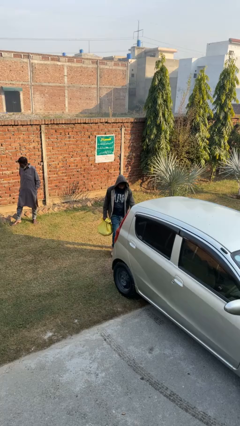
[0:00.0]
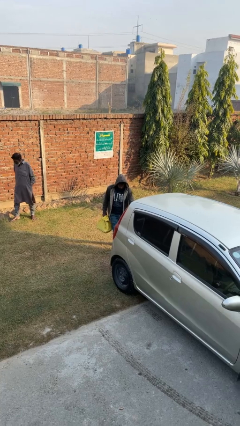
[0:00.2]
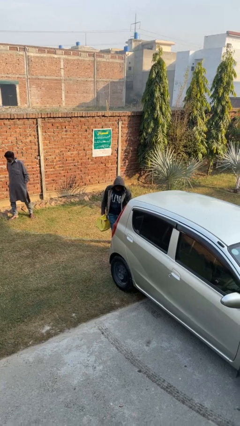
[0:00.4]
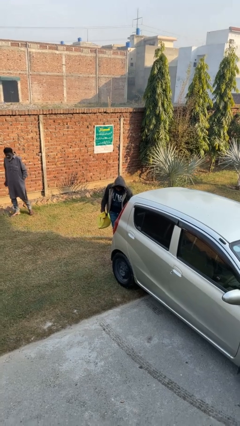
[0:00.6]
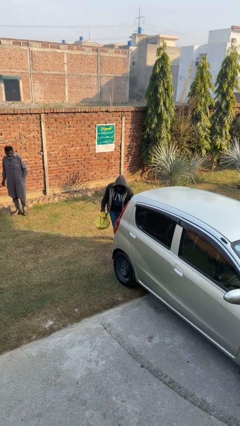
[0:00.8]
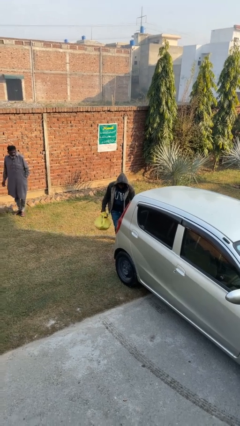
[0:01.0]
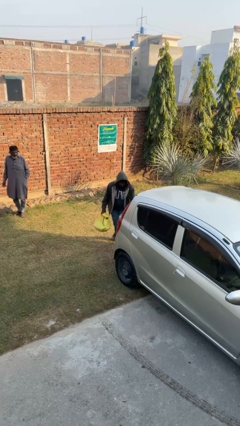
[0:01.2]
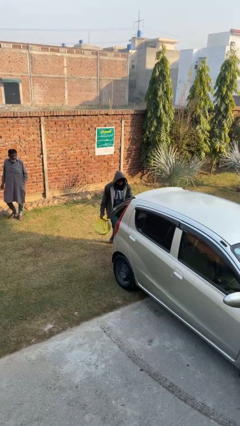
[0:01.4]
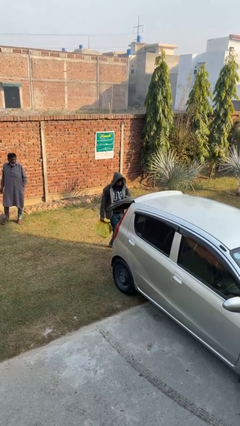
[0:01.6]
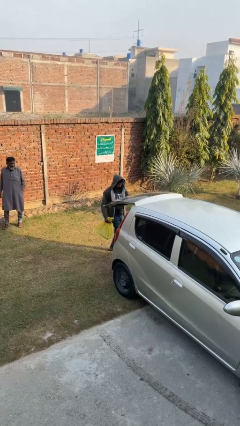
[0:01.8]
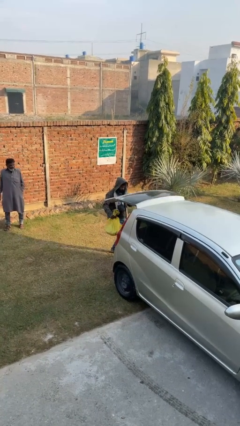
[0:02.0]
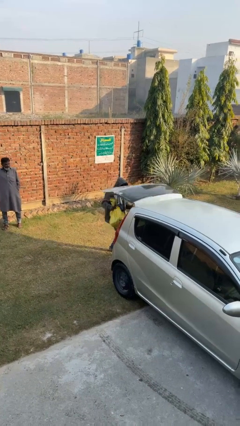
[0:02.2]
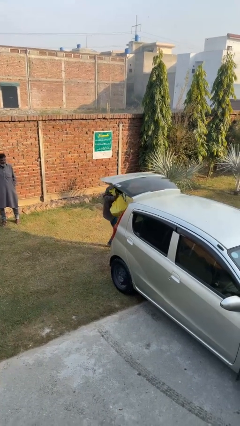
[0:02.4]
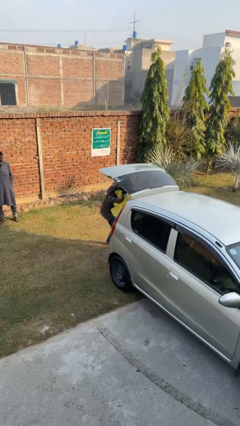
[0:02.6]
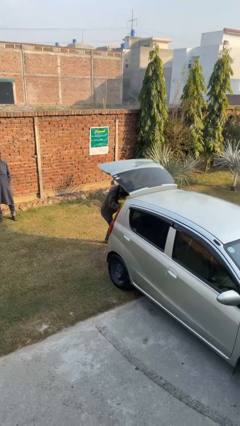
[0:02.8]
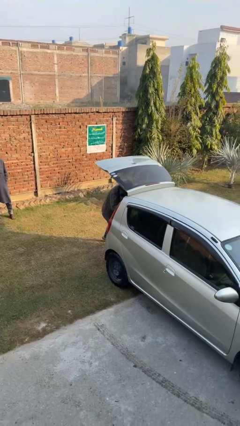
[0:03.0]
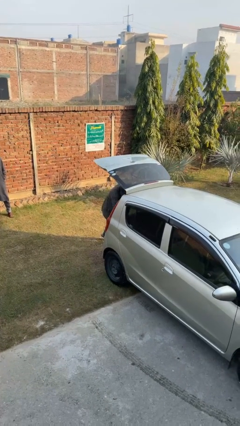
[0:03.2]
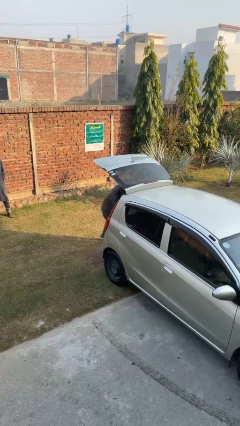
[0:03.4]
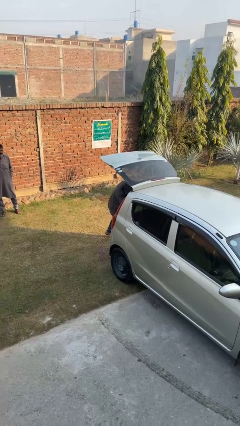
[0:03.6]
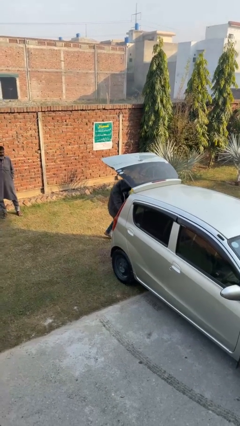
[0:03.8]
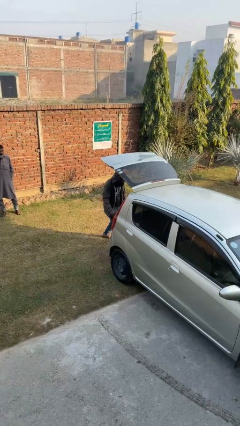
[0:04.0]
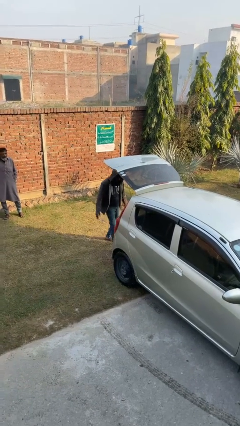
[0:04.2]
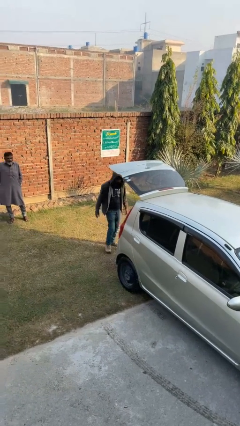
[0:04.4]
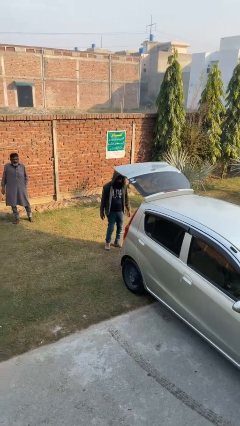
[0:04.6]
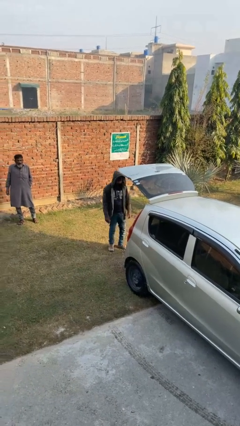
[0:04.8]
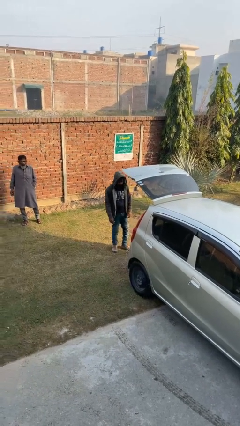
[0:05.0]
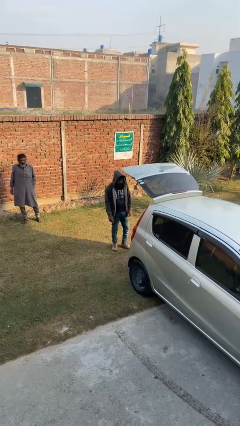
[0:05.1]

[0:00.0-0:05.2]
person loads car

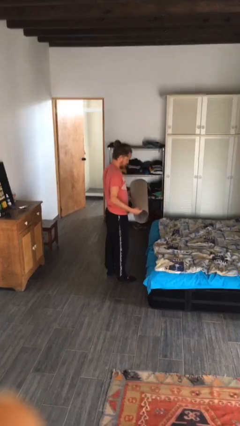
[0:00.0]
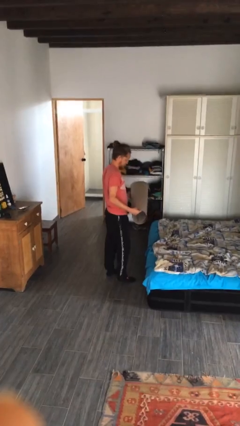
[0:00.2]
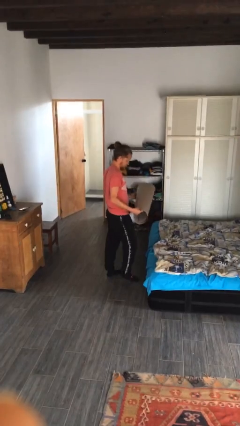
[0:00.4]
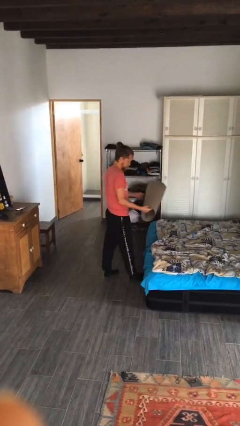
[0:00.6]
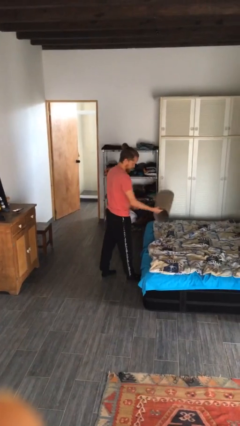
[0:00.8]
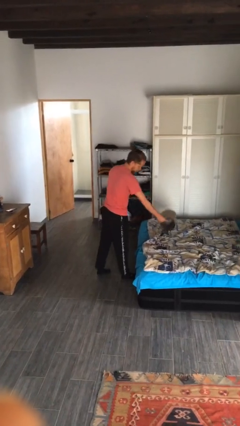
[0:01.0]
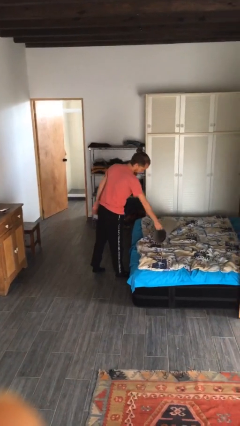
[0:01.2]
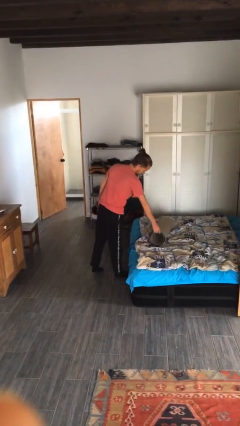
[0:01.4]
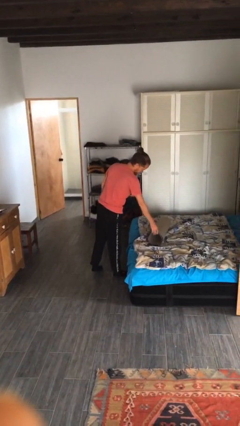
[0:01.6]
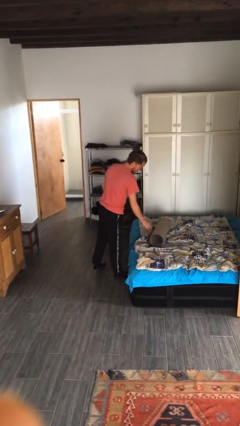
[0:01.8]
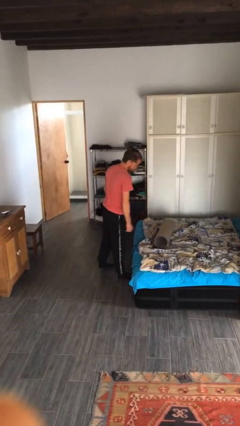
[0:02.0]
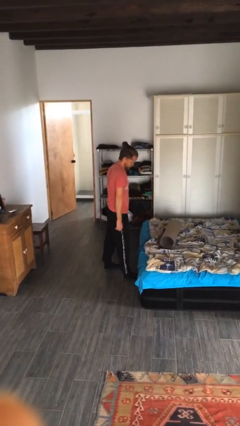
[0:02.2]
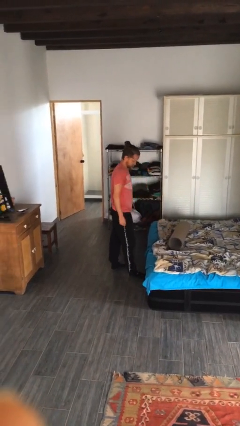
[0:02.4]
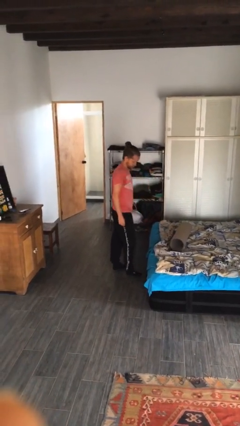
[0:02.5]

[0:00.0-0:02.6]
person puts down object on bed

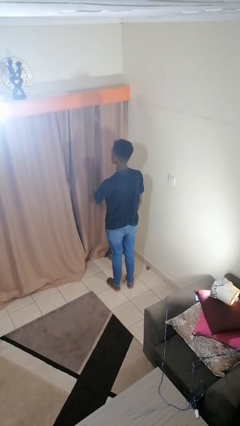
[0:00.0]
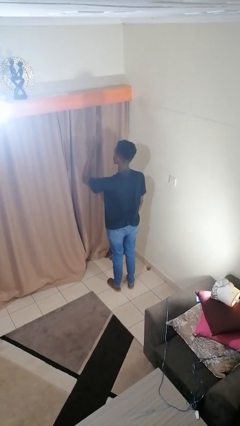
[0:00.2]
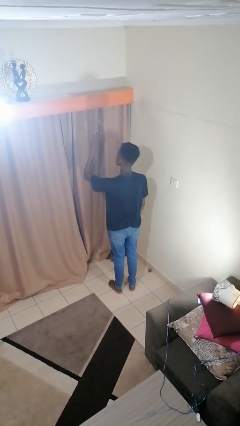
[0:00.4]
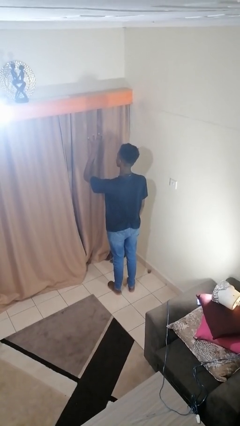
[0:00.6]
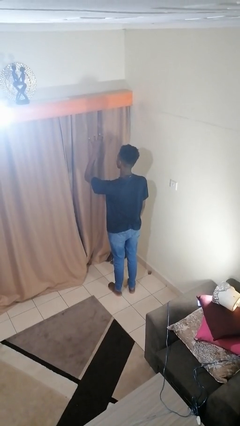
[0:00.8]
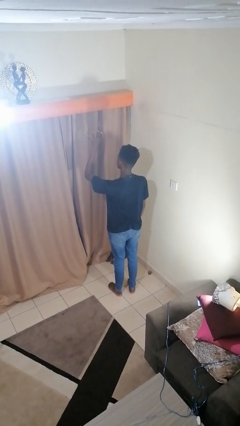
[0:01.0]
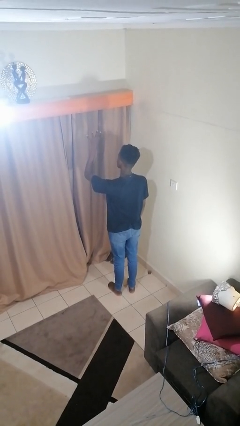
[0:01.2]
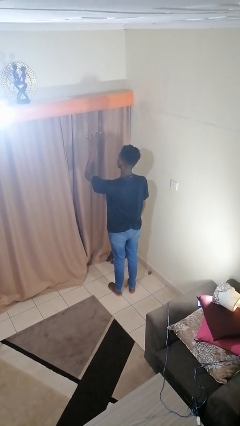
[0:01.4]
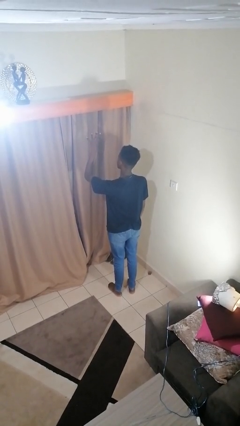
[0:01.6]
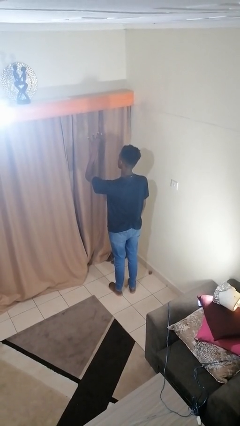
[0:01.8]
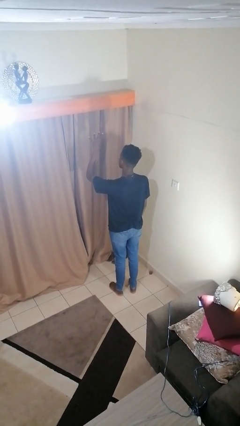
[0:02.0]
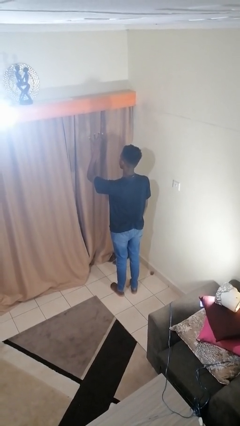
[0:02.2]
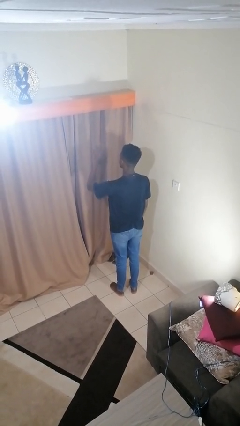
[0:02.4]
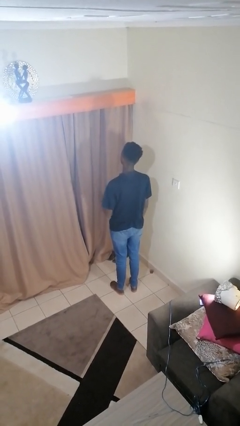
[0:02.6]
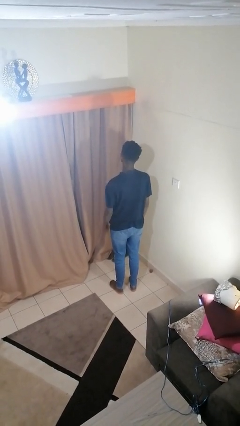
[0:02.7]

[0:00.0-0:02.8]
person gestures number four

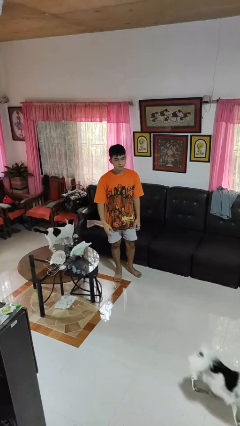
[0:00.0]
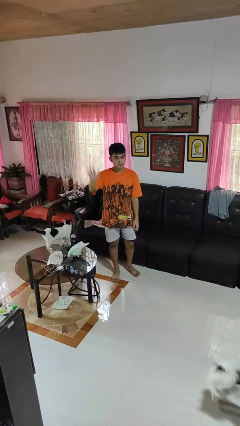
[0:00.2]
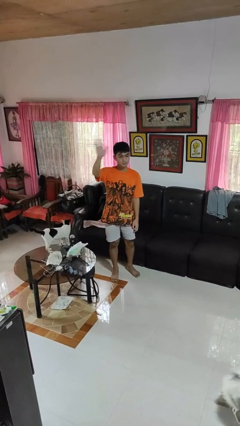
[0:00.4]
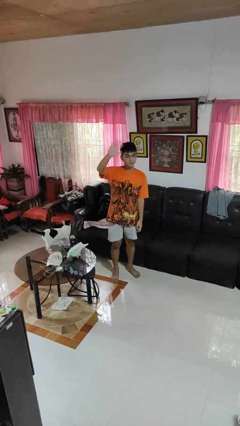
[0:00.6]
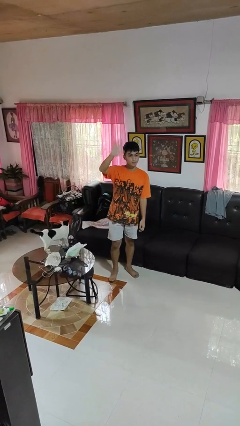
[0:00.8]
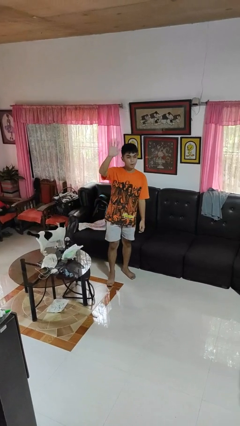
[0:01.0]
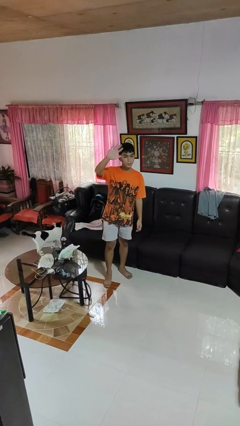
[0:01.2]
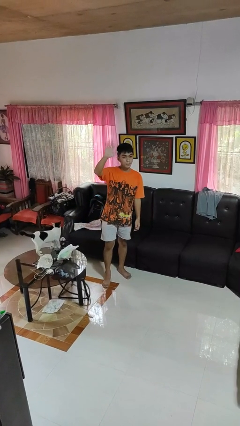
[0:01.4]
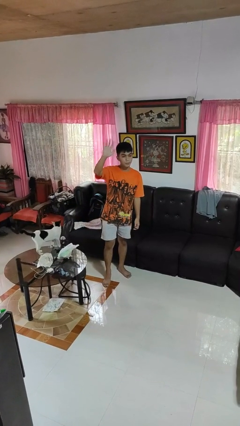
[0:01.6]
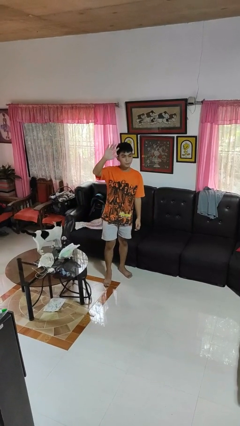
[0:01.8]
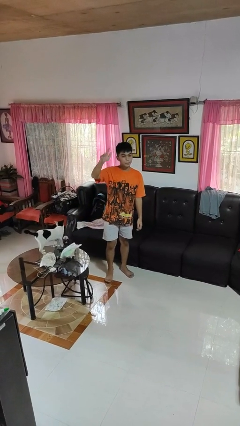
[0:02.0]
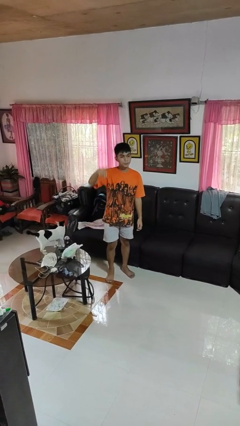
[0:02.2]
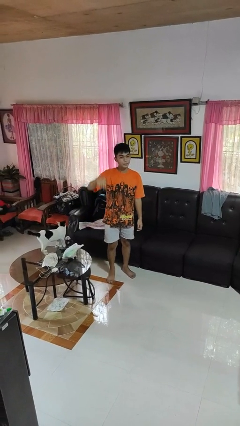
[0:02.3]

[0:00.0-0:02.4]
person waves at person

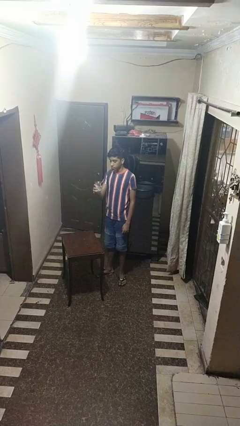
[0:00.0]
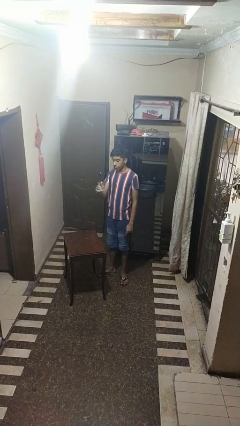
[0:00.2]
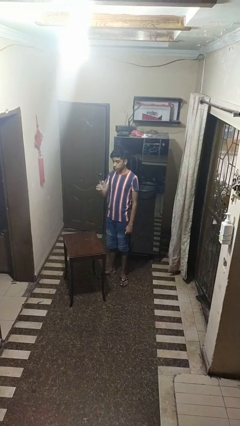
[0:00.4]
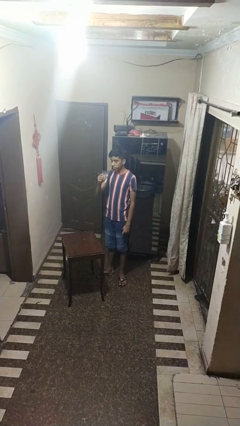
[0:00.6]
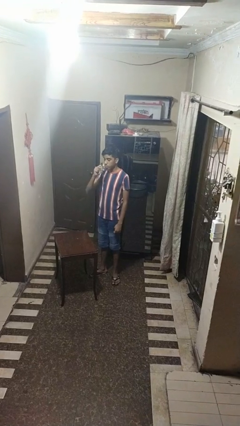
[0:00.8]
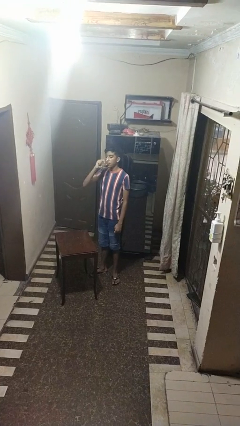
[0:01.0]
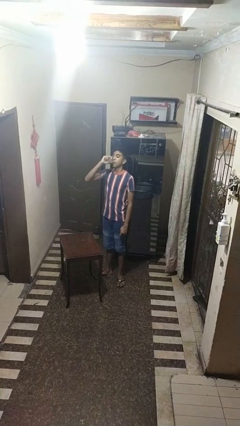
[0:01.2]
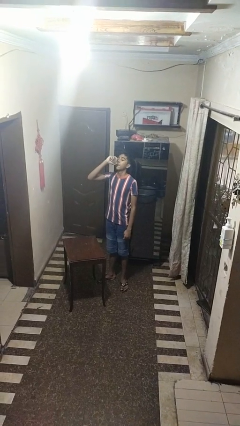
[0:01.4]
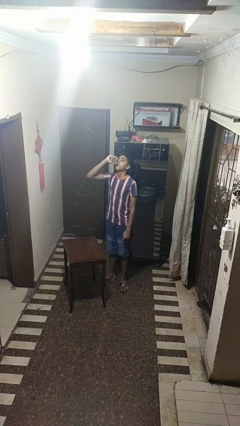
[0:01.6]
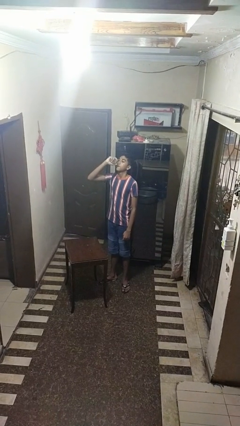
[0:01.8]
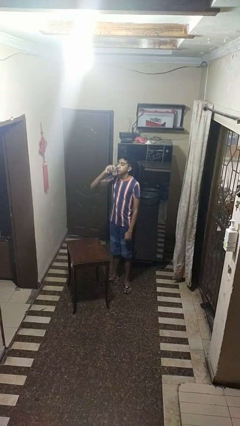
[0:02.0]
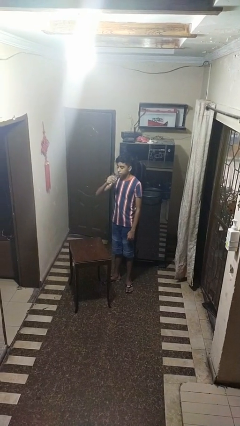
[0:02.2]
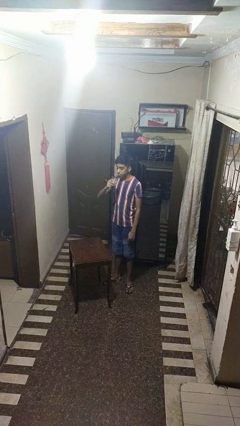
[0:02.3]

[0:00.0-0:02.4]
person drinks from shotglass

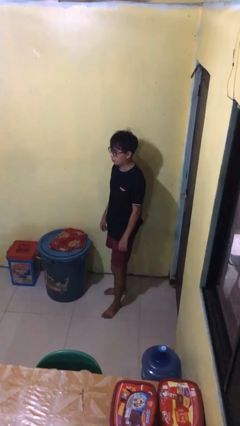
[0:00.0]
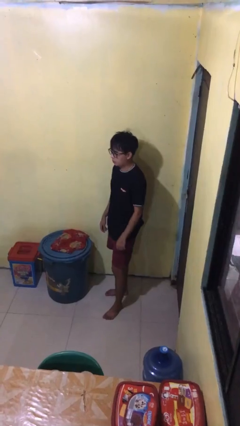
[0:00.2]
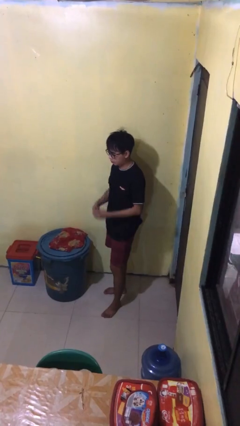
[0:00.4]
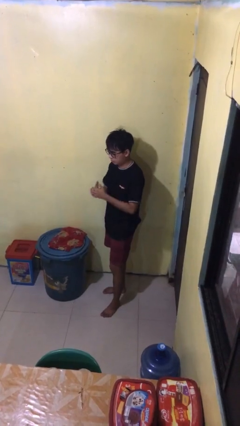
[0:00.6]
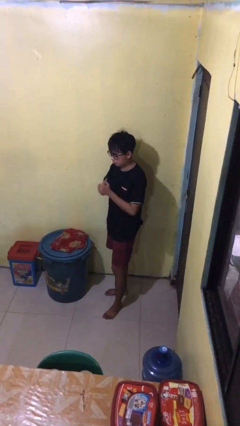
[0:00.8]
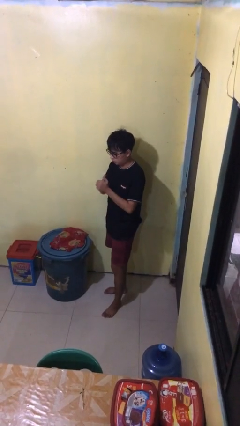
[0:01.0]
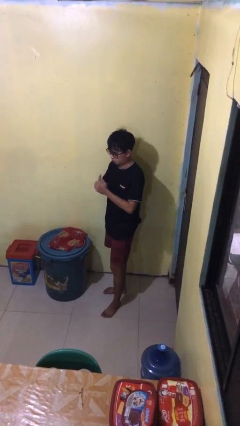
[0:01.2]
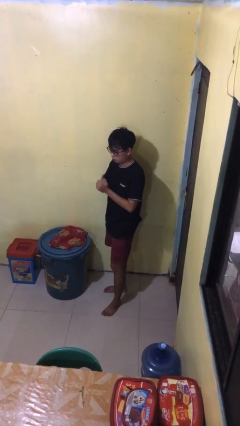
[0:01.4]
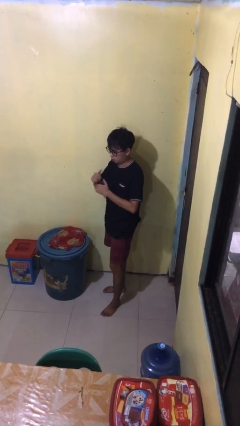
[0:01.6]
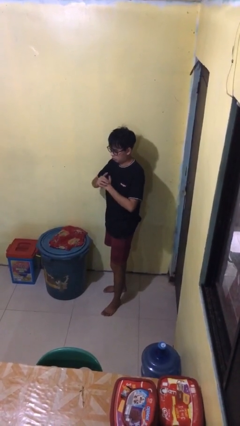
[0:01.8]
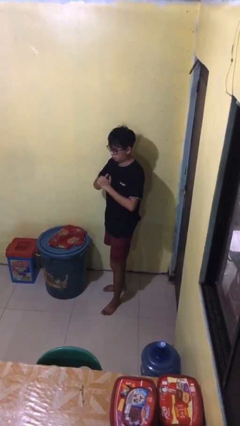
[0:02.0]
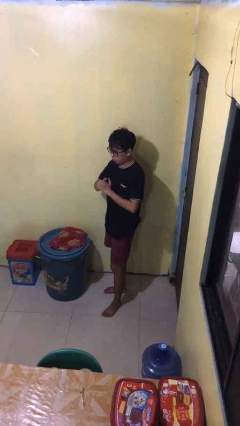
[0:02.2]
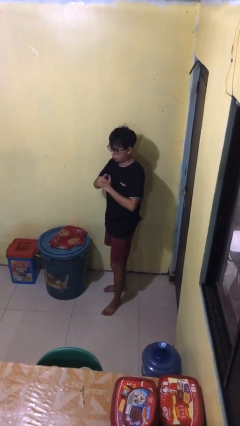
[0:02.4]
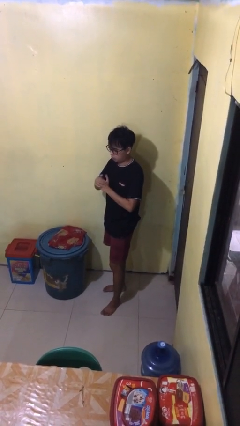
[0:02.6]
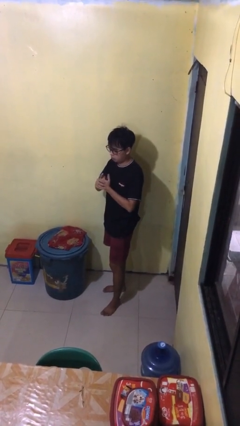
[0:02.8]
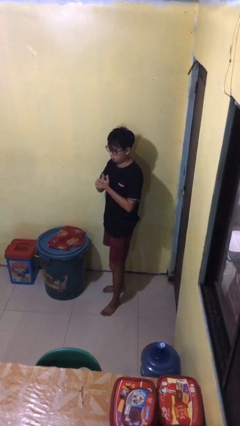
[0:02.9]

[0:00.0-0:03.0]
person cracks knuckles
